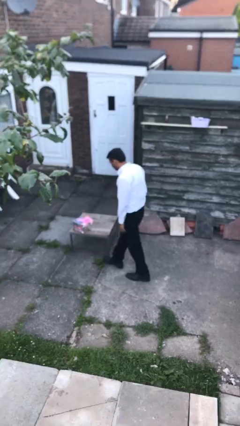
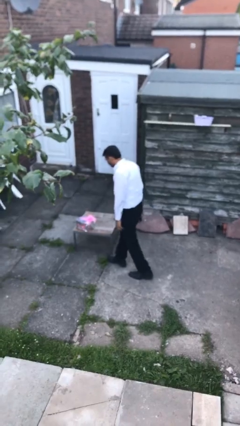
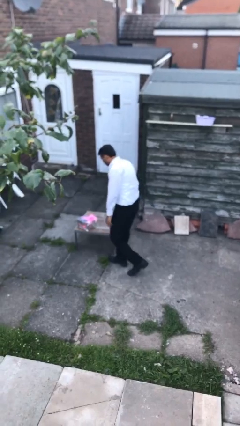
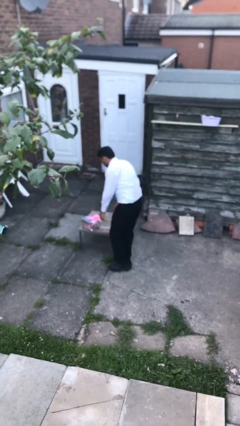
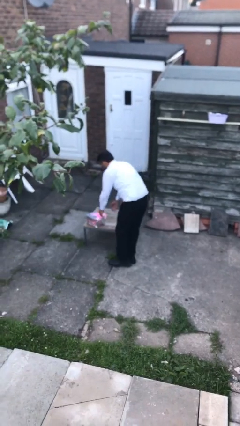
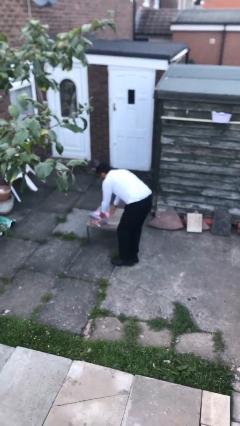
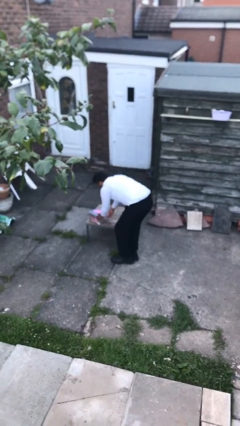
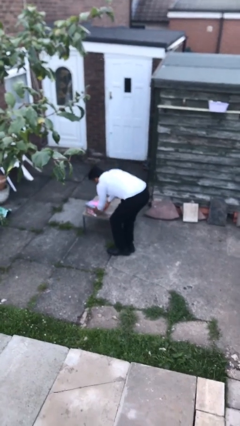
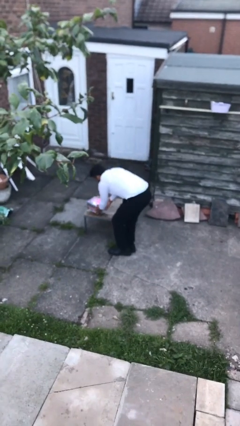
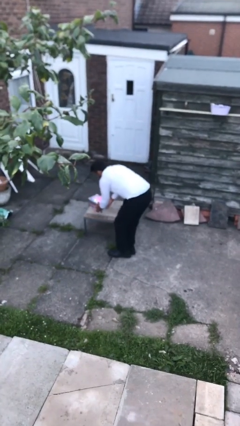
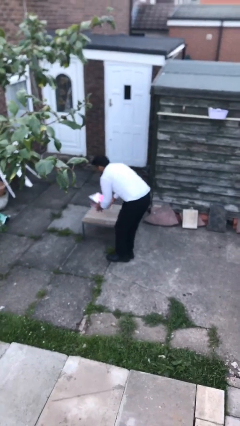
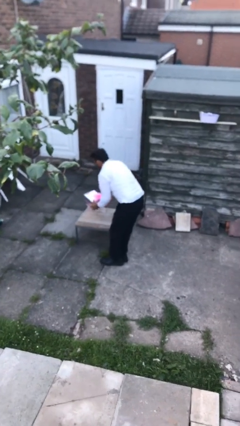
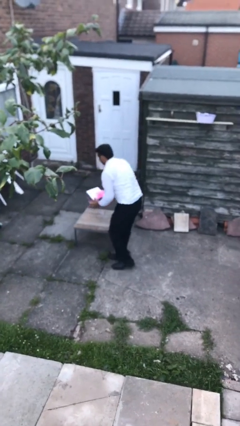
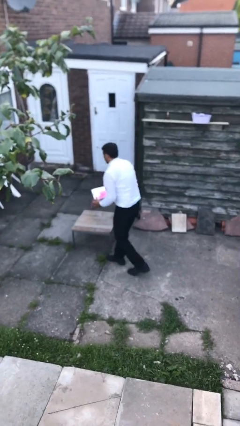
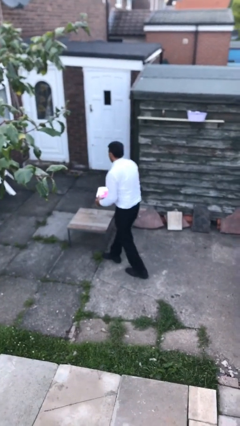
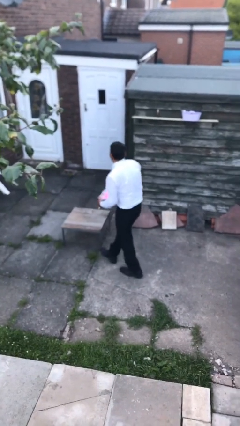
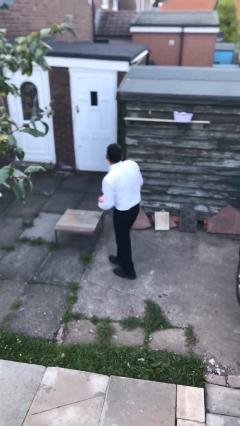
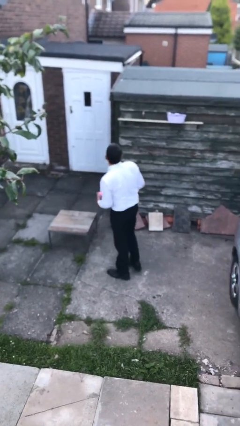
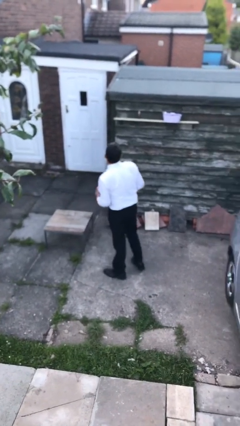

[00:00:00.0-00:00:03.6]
person picks up object from table

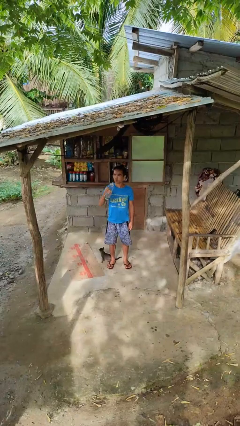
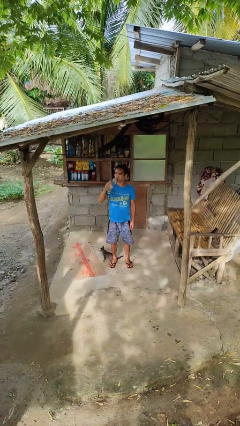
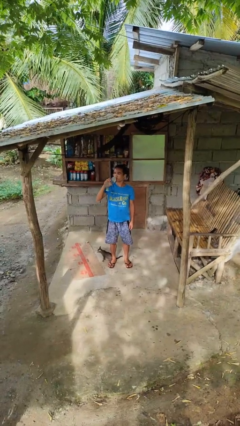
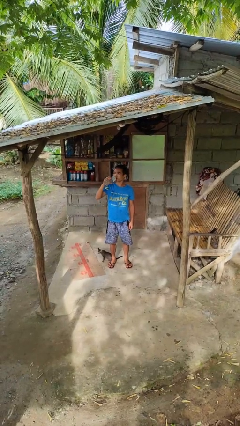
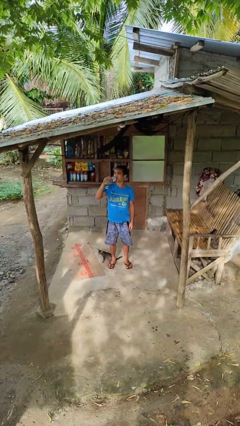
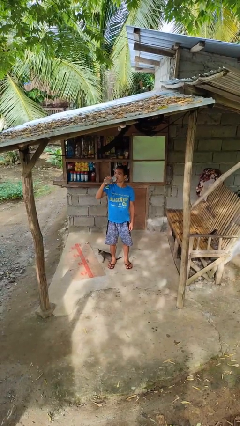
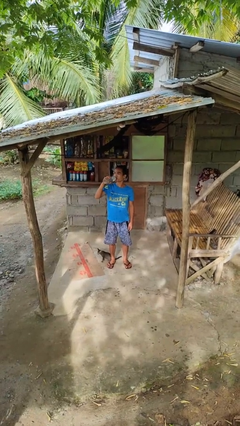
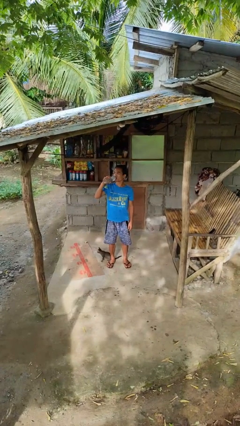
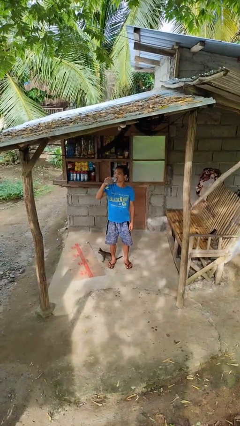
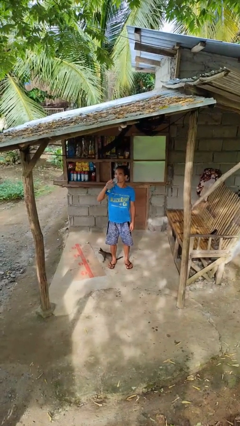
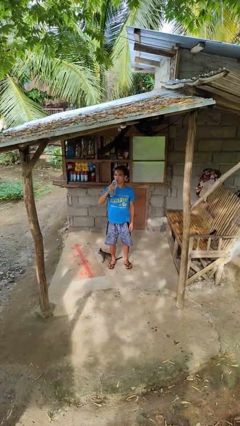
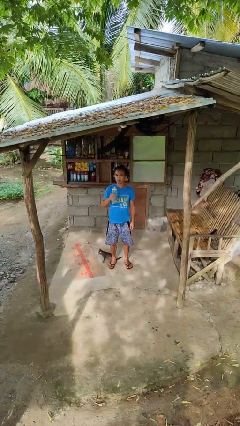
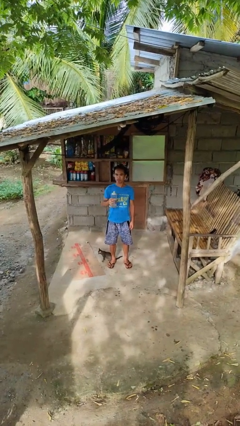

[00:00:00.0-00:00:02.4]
person drinks from bottle

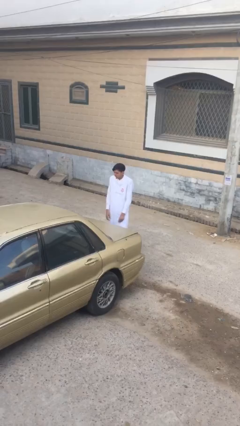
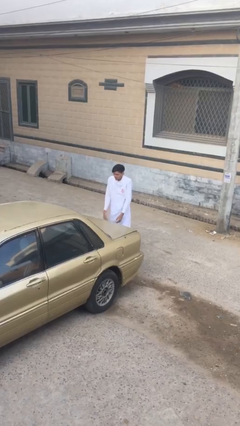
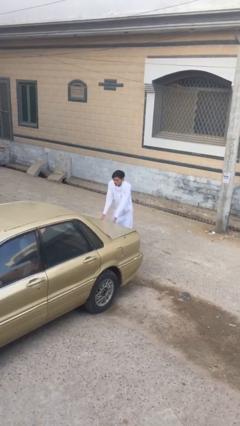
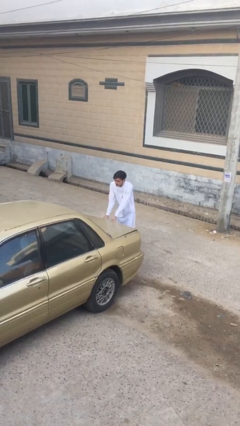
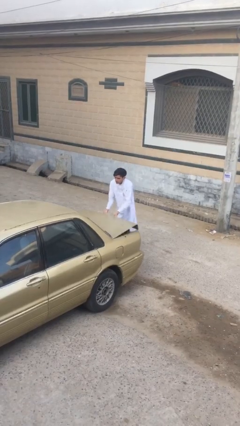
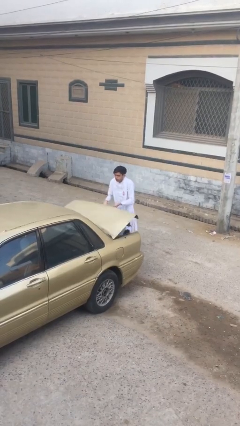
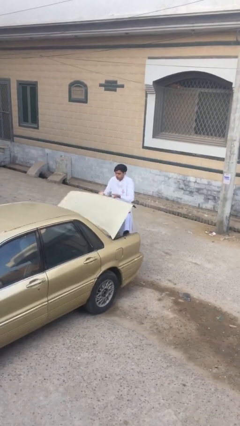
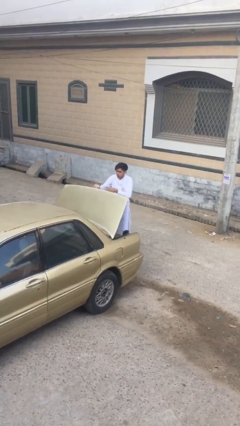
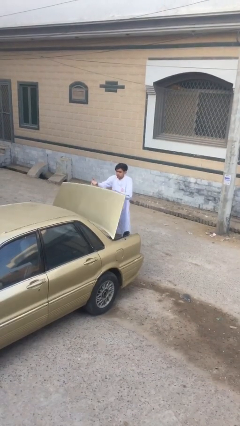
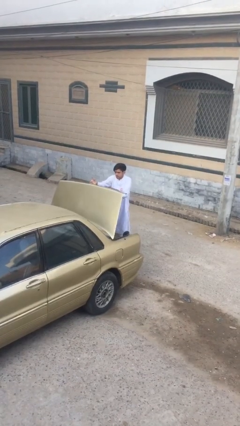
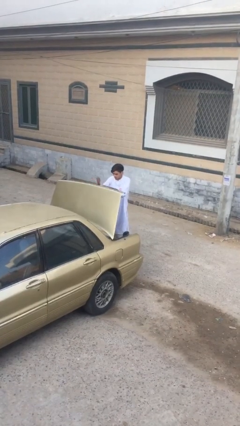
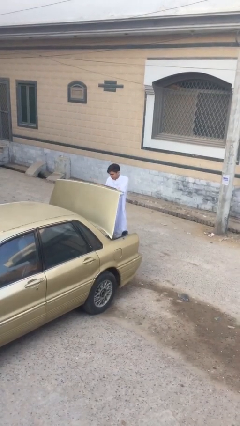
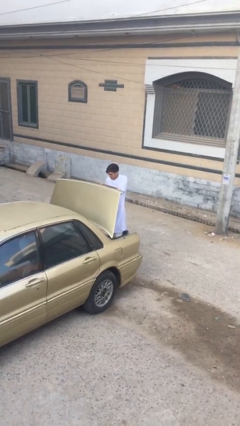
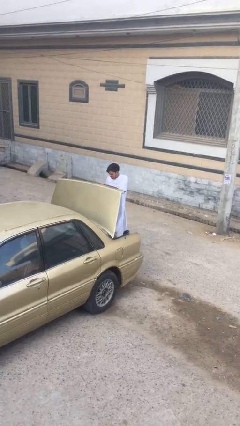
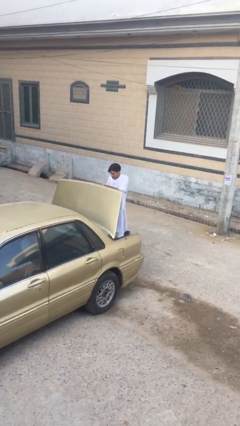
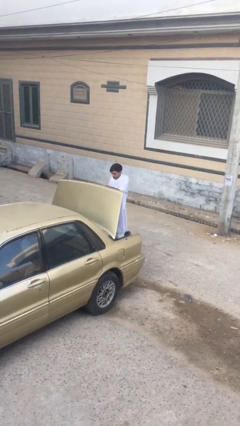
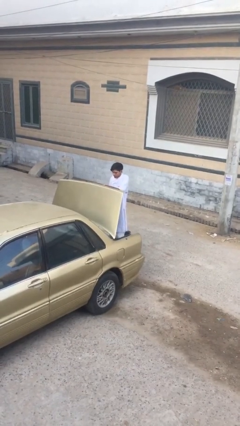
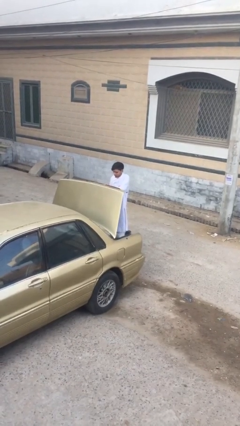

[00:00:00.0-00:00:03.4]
person opens car trunk

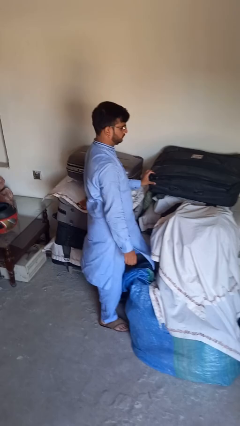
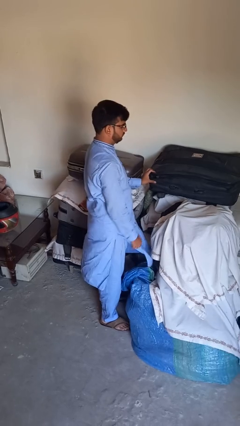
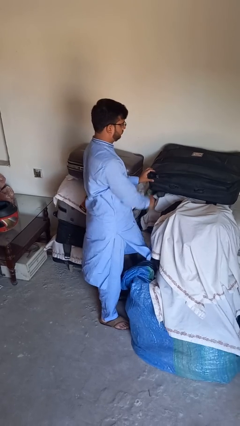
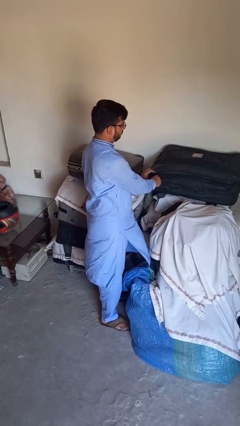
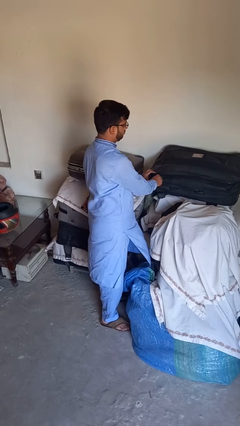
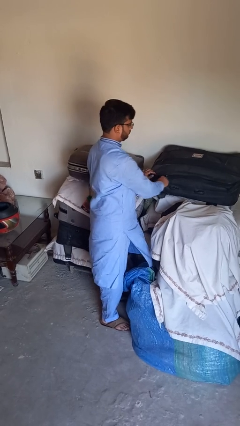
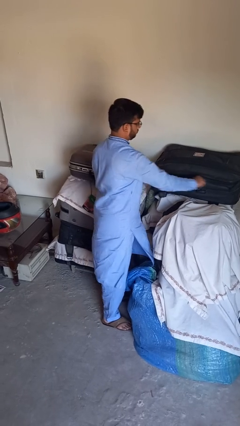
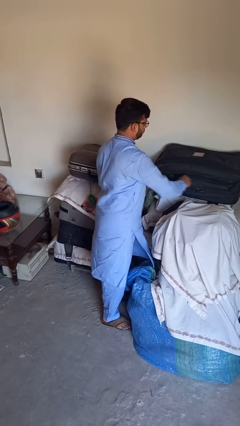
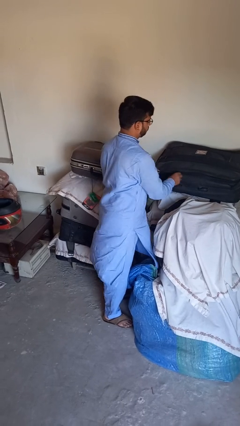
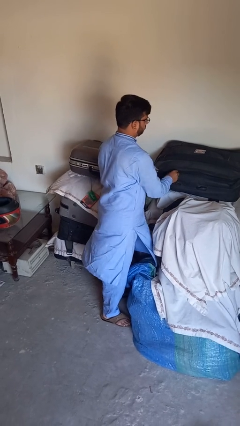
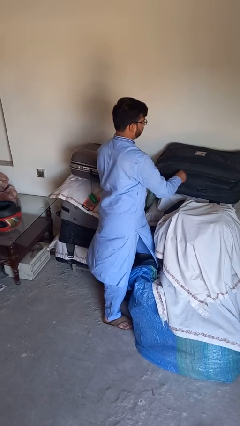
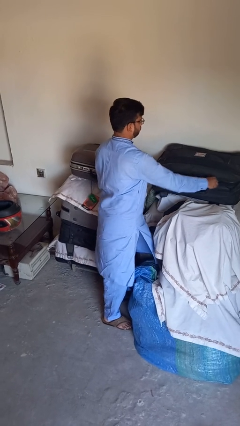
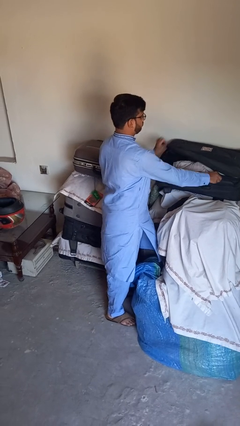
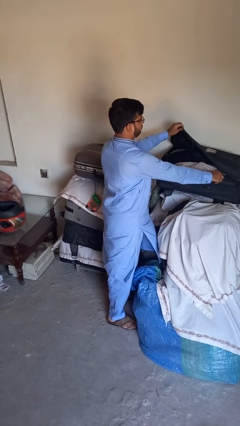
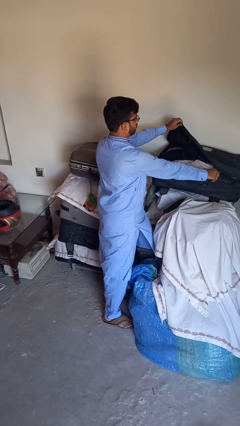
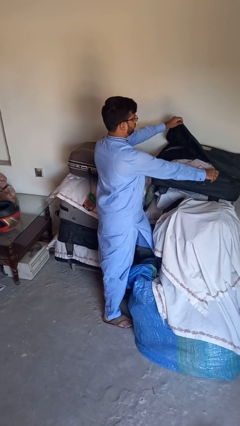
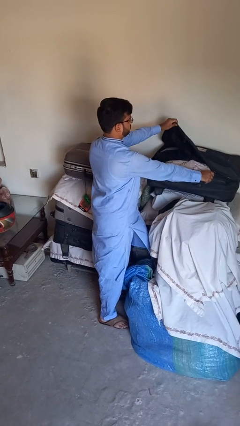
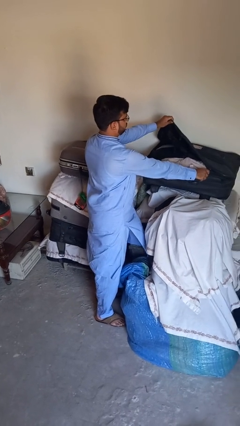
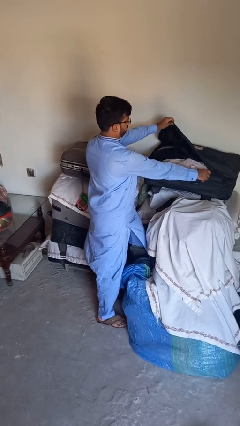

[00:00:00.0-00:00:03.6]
person opens suitcase

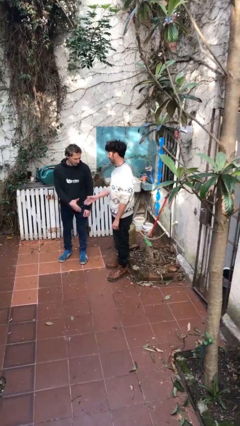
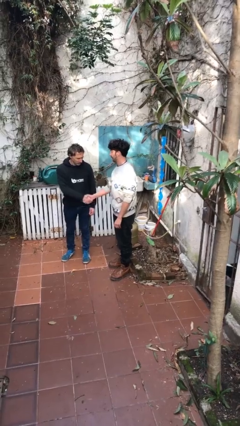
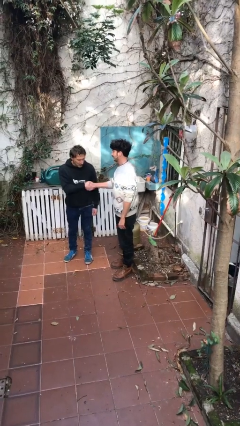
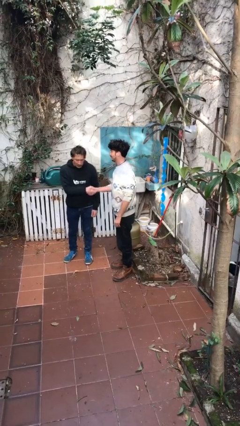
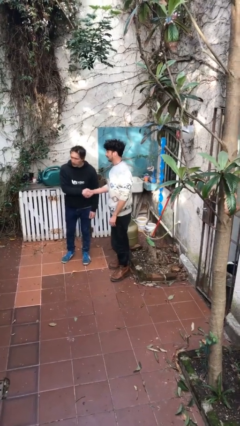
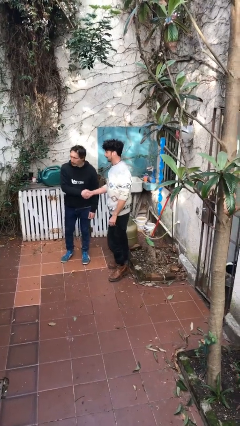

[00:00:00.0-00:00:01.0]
person shakes hand

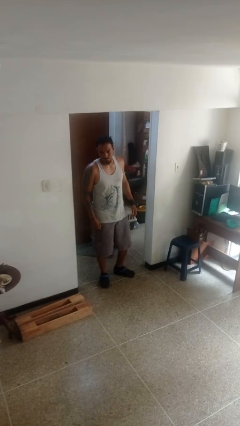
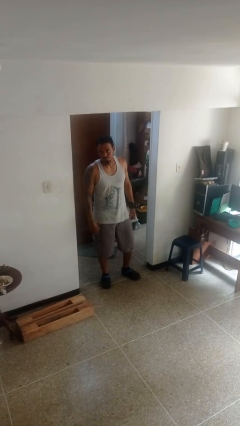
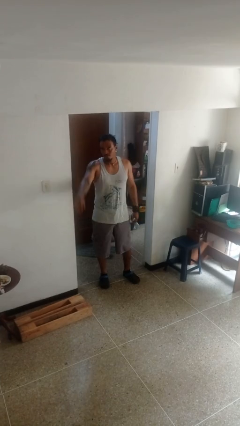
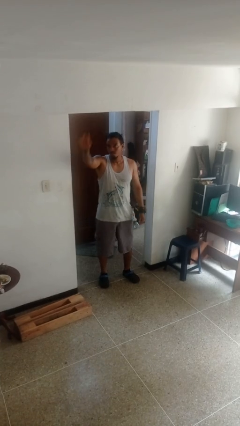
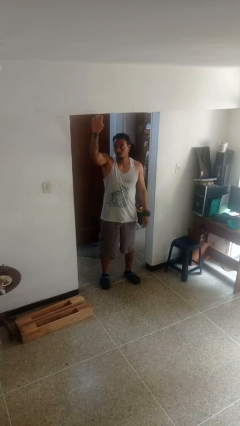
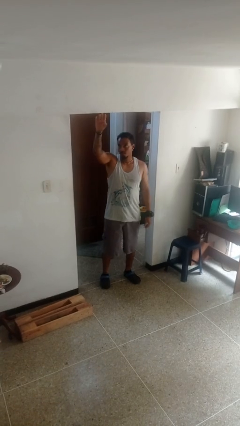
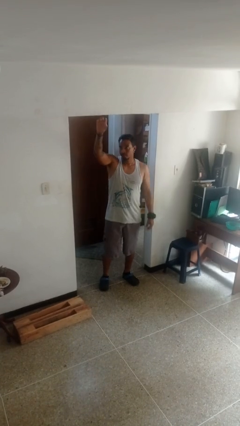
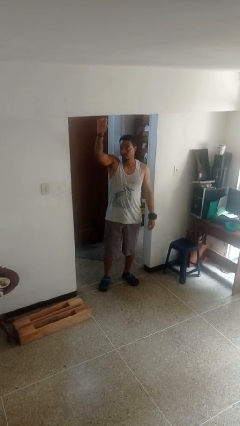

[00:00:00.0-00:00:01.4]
person gestures swipe up

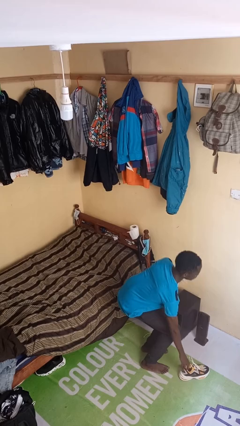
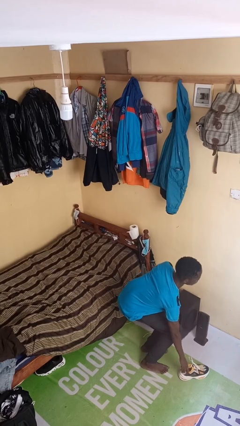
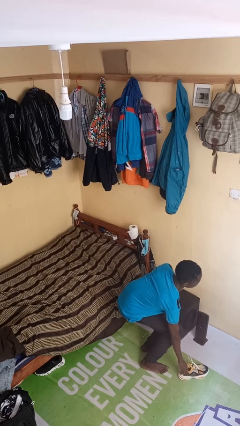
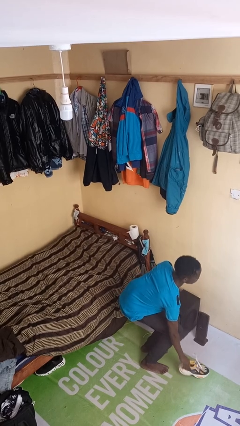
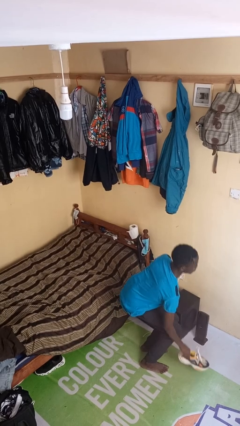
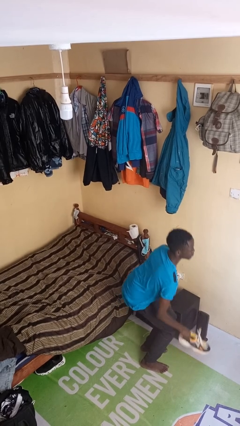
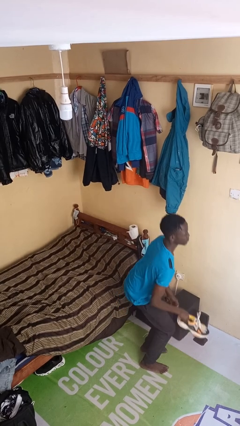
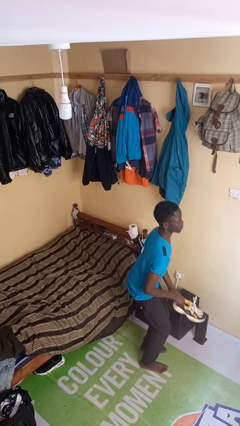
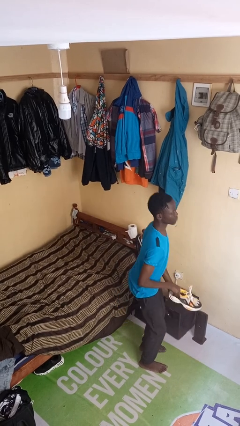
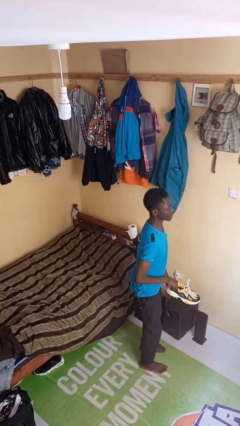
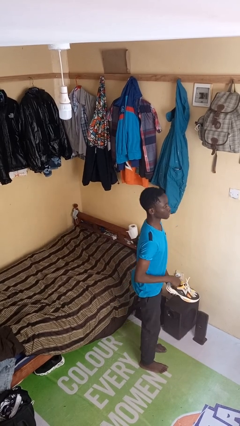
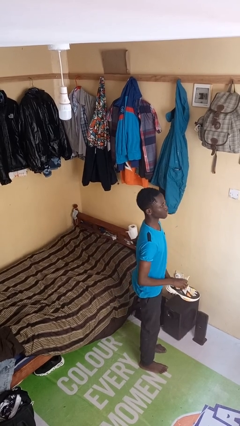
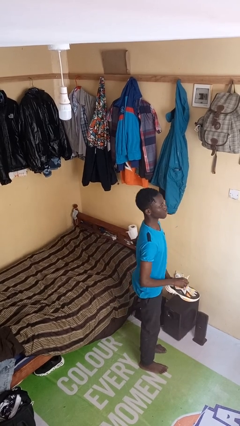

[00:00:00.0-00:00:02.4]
person picks up object from floor
